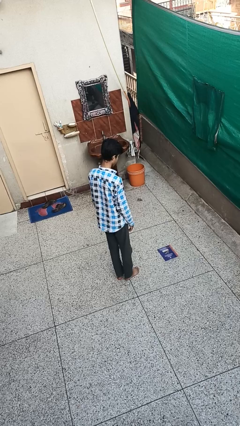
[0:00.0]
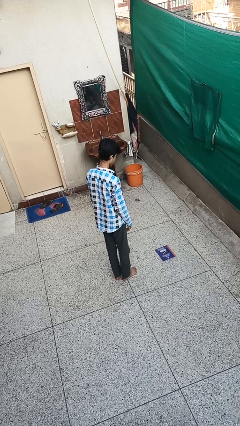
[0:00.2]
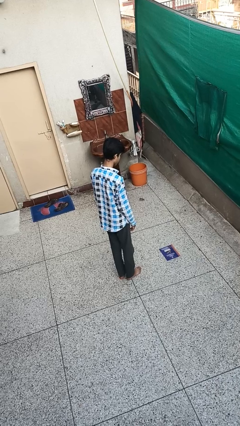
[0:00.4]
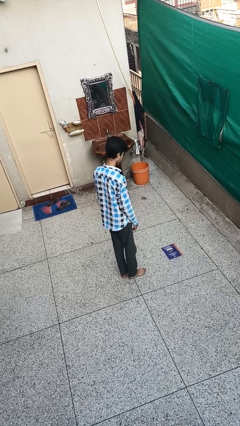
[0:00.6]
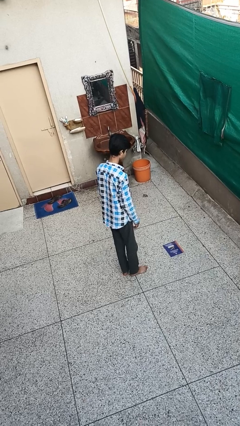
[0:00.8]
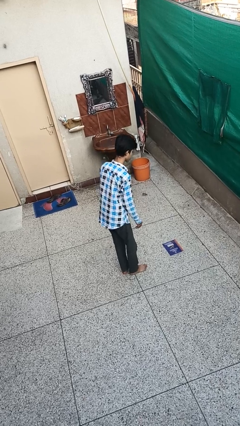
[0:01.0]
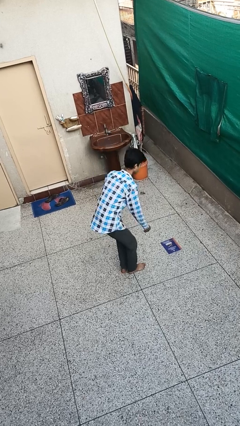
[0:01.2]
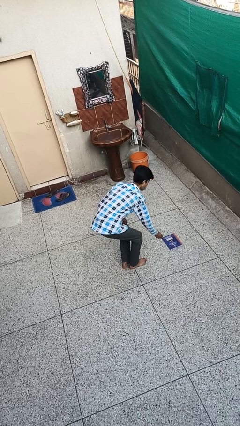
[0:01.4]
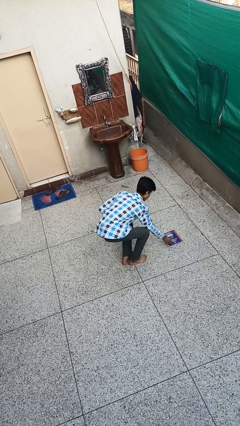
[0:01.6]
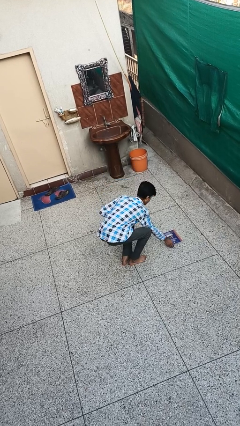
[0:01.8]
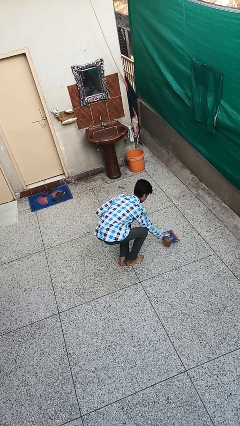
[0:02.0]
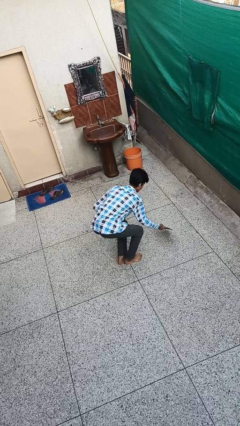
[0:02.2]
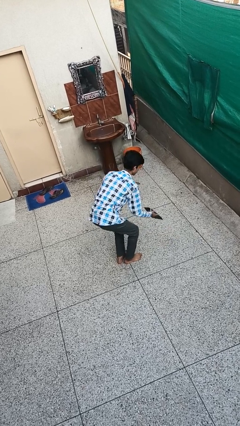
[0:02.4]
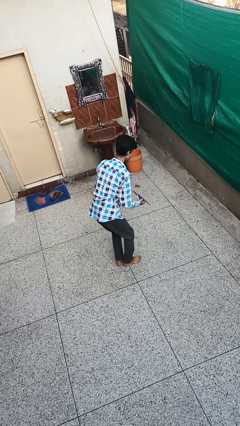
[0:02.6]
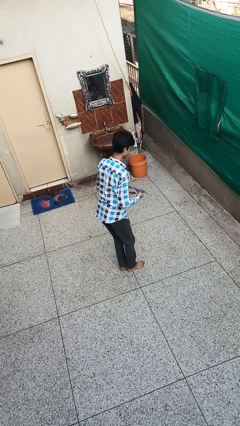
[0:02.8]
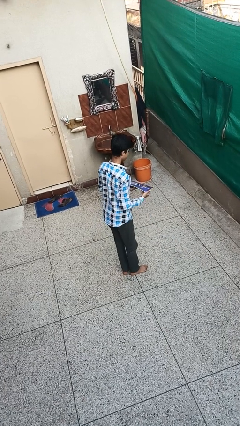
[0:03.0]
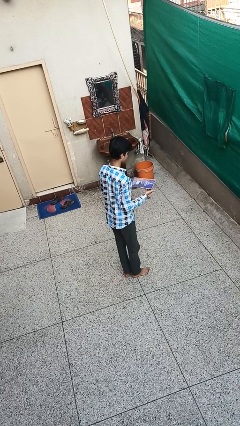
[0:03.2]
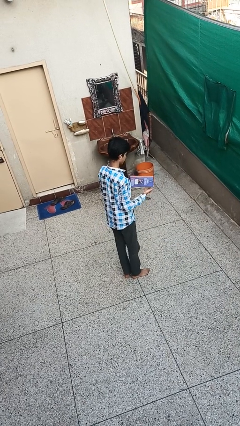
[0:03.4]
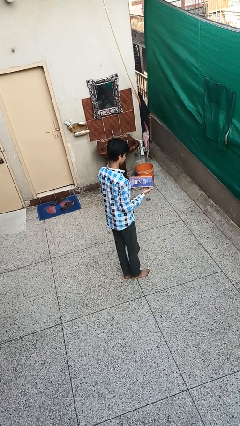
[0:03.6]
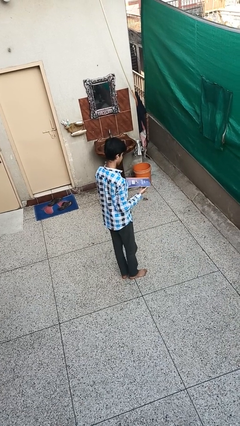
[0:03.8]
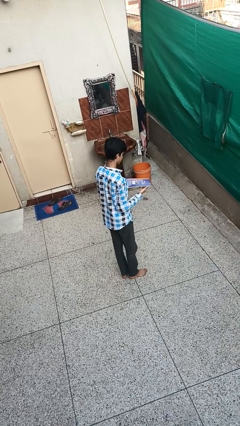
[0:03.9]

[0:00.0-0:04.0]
person picks up object from floor

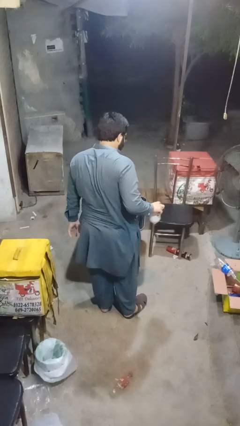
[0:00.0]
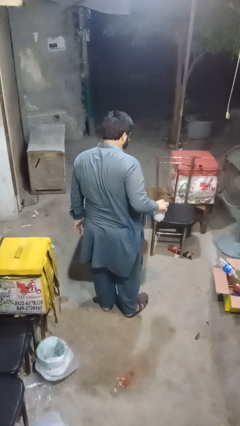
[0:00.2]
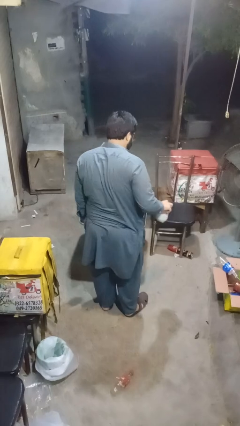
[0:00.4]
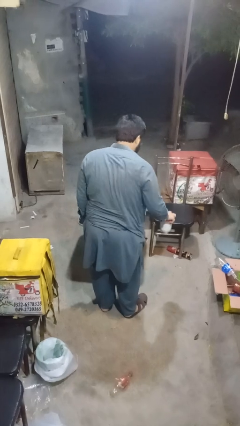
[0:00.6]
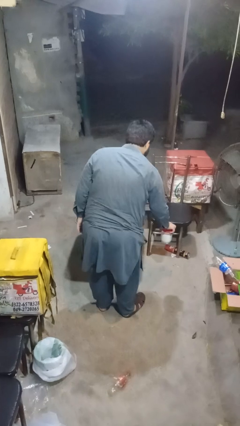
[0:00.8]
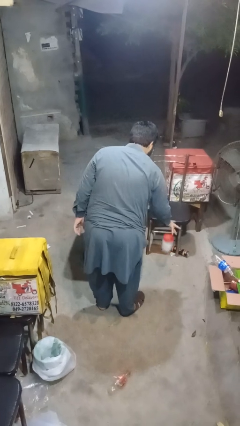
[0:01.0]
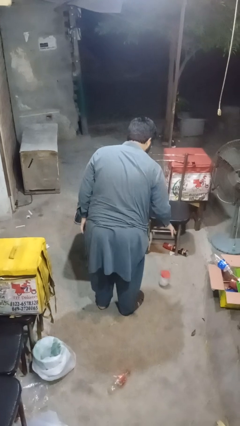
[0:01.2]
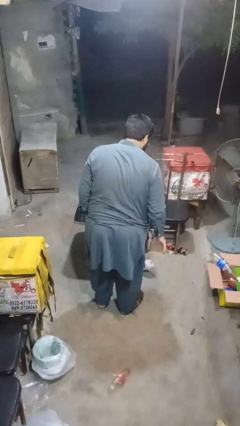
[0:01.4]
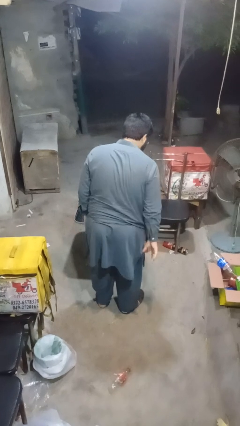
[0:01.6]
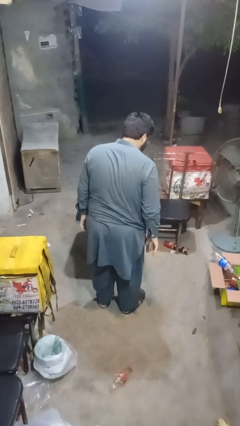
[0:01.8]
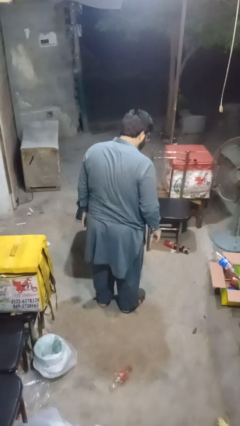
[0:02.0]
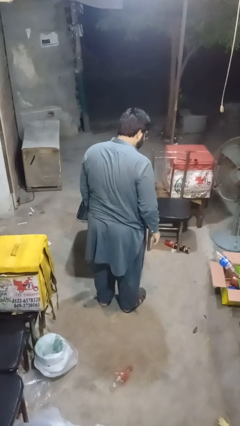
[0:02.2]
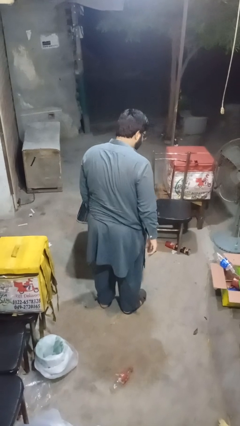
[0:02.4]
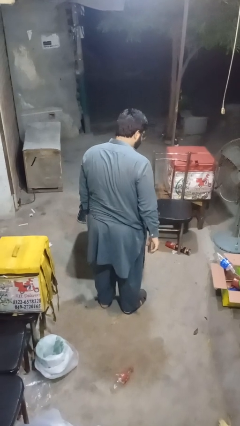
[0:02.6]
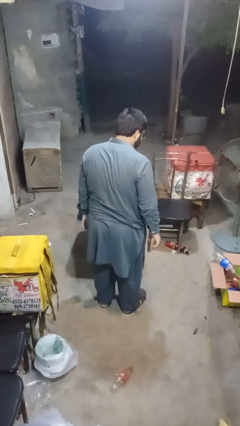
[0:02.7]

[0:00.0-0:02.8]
person throws object to ground

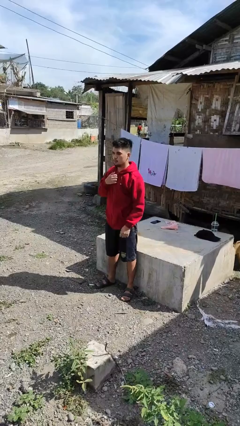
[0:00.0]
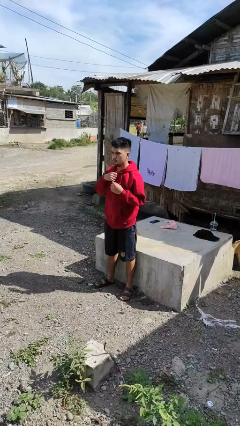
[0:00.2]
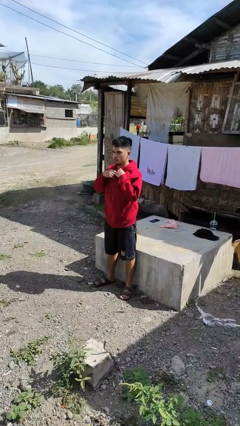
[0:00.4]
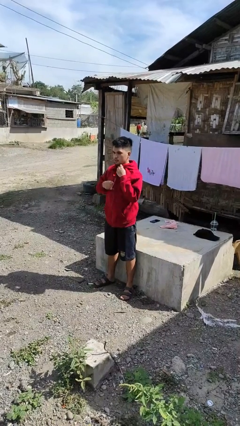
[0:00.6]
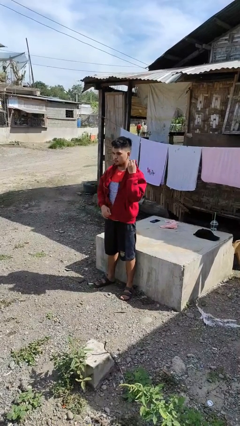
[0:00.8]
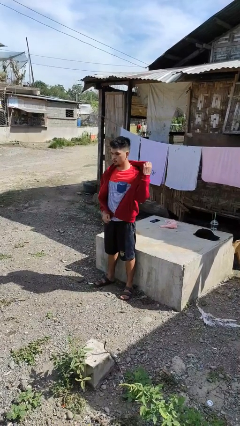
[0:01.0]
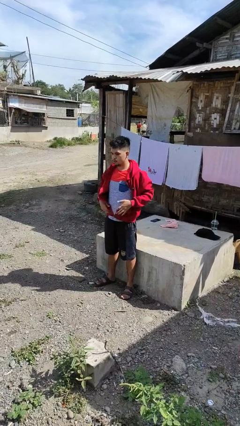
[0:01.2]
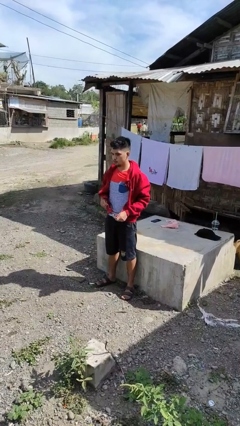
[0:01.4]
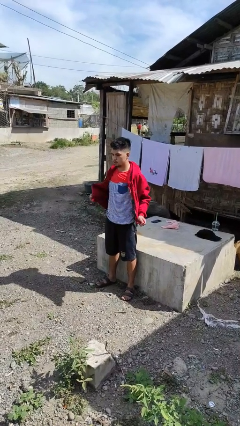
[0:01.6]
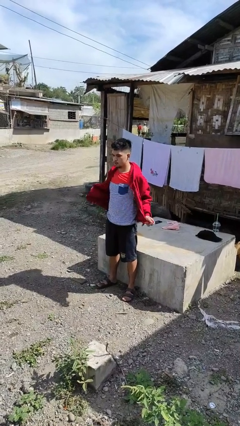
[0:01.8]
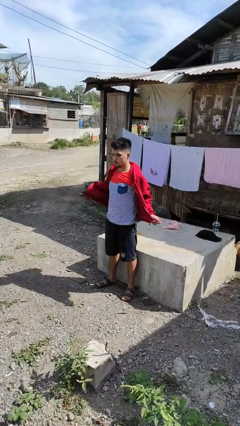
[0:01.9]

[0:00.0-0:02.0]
person unzips jacket

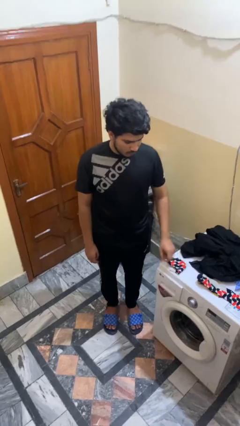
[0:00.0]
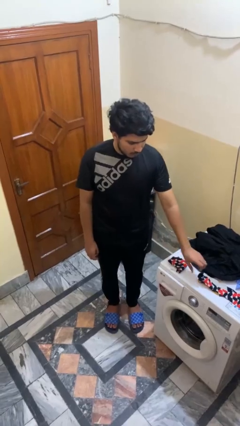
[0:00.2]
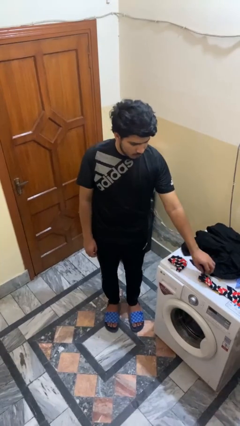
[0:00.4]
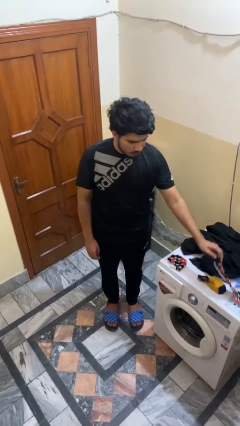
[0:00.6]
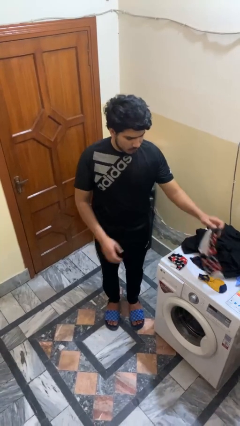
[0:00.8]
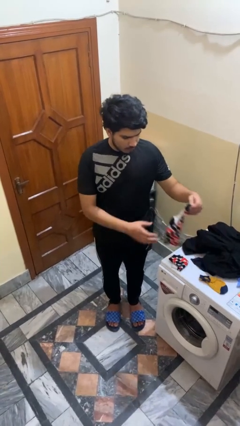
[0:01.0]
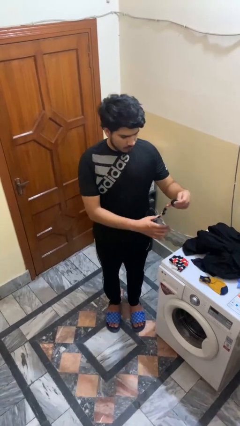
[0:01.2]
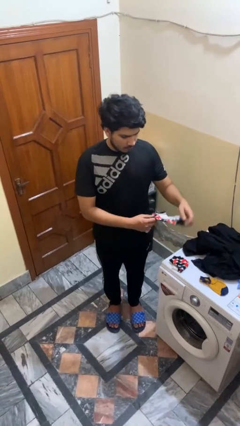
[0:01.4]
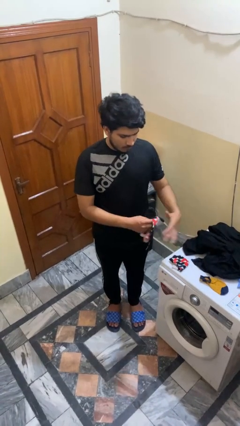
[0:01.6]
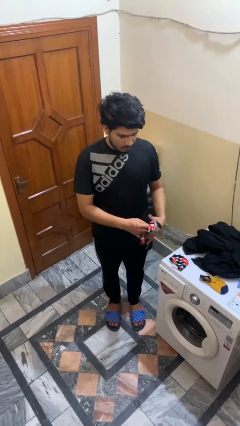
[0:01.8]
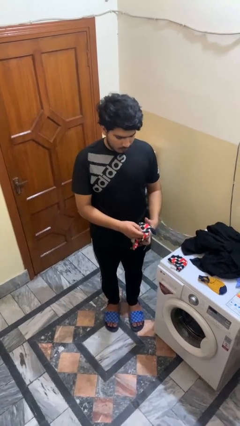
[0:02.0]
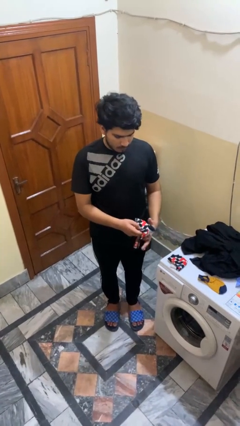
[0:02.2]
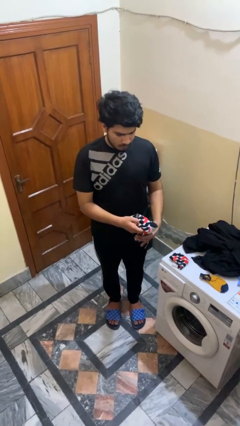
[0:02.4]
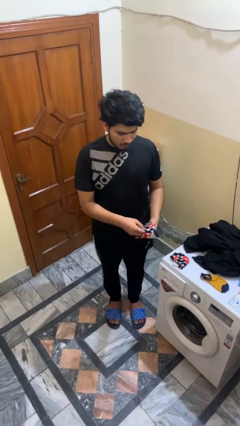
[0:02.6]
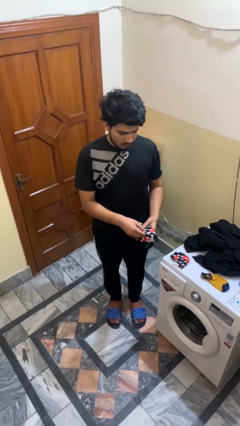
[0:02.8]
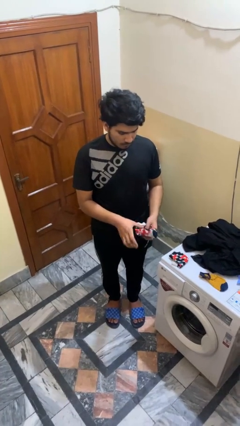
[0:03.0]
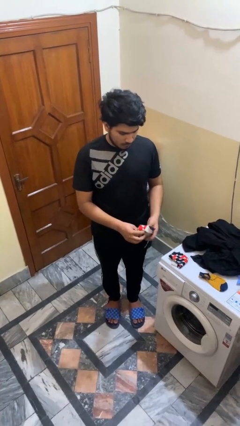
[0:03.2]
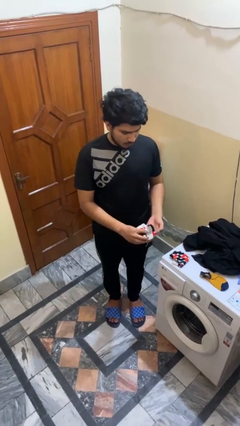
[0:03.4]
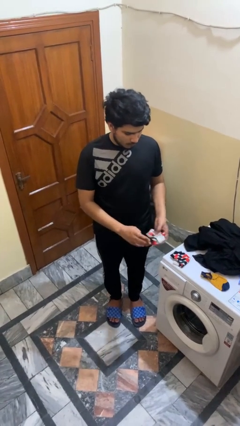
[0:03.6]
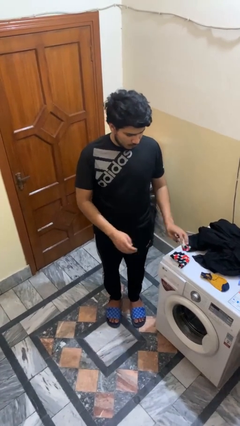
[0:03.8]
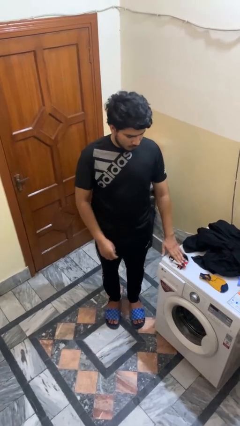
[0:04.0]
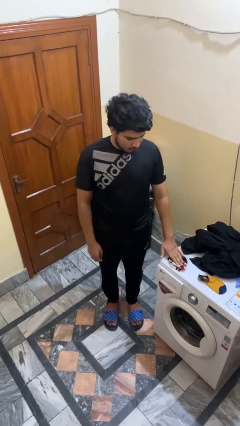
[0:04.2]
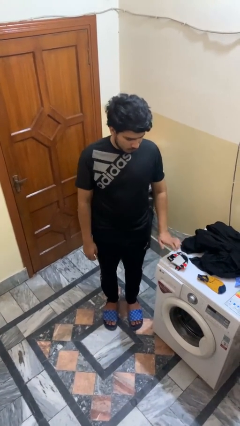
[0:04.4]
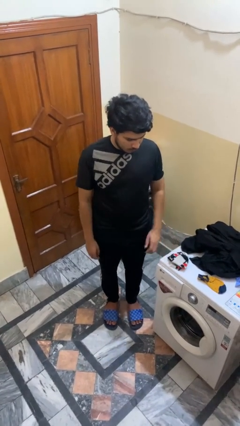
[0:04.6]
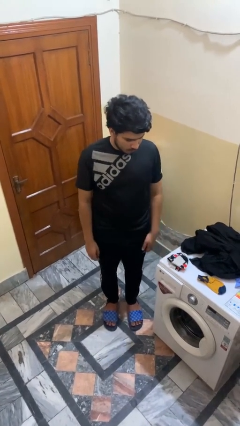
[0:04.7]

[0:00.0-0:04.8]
person folds socks

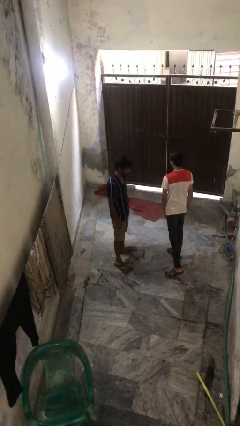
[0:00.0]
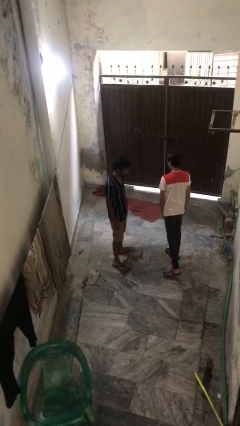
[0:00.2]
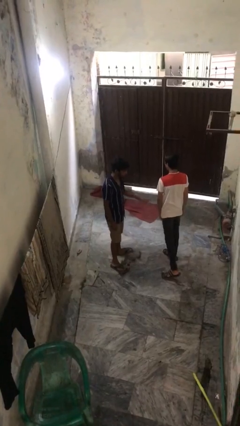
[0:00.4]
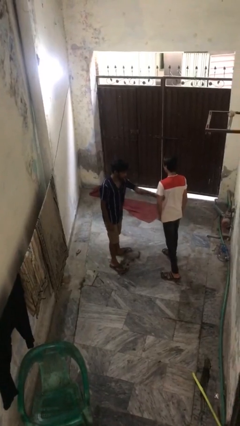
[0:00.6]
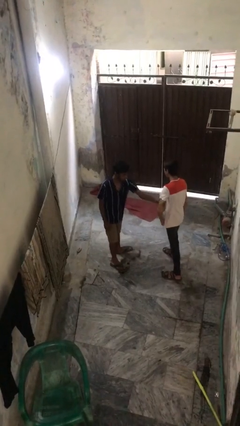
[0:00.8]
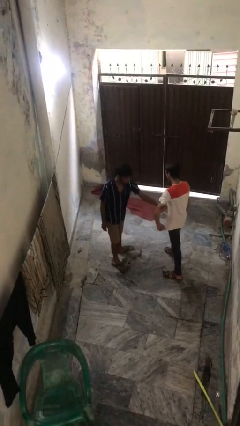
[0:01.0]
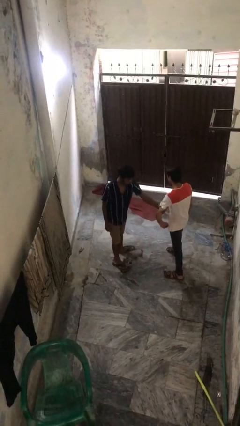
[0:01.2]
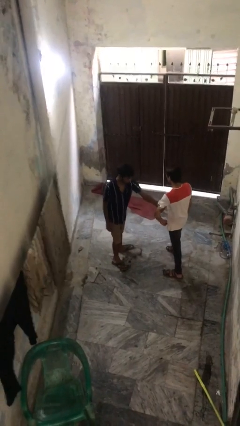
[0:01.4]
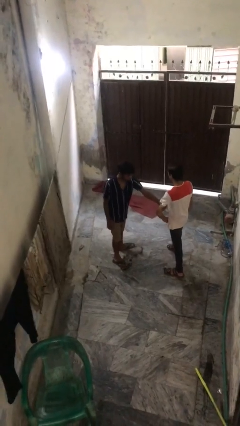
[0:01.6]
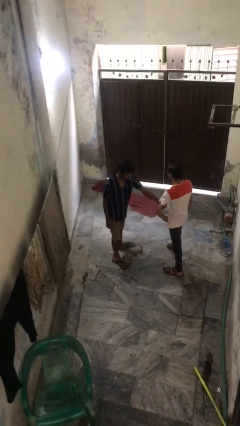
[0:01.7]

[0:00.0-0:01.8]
person grabs person by bicep

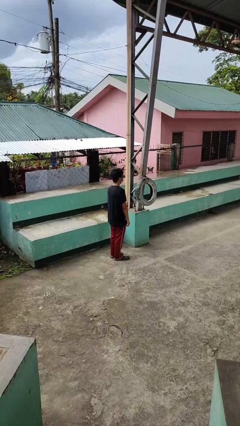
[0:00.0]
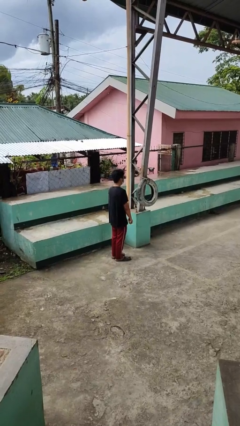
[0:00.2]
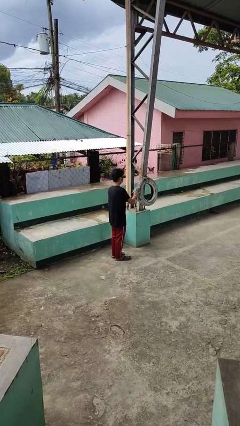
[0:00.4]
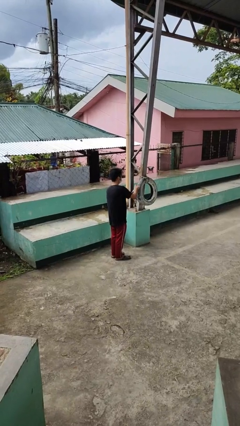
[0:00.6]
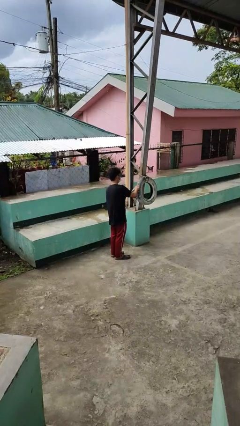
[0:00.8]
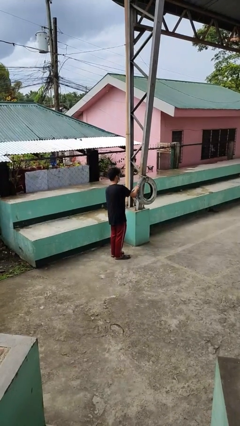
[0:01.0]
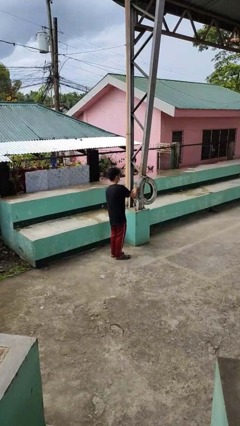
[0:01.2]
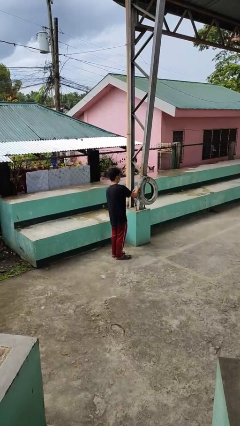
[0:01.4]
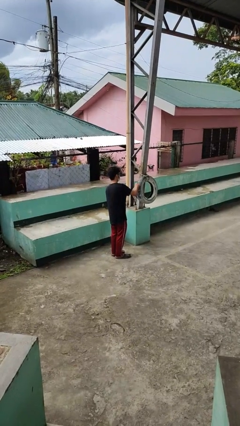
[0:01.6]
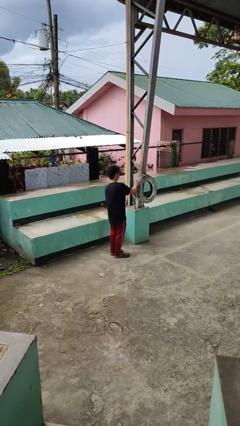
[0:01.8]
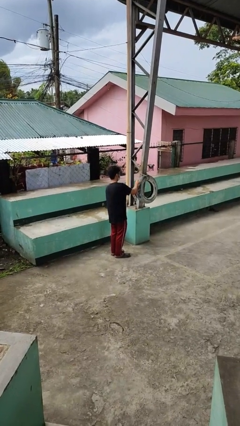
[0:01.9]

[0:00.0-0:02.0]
person taps object with finger
